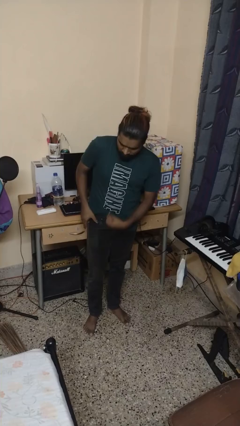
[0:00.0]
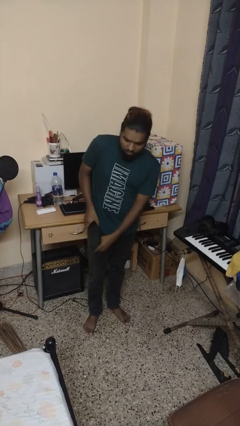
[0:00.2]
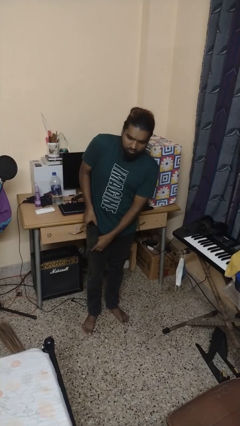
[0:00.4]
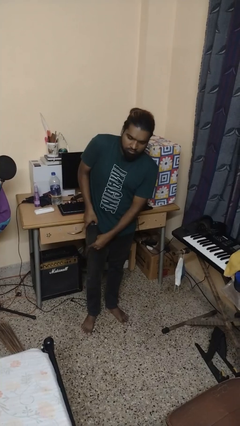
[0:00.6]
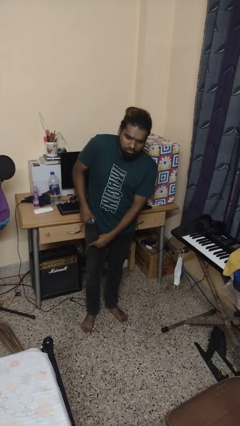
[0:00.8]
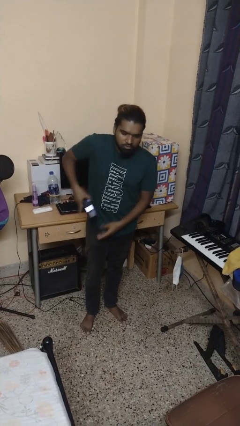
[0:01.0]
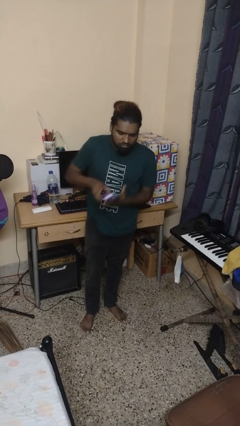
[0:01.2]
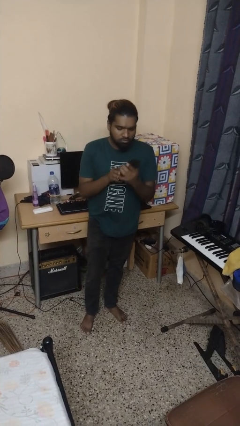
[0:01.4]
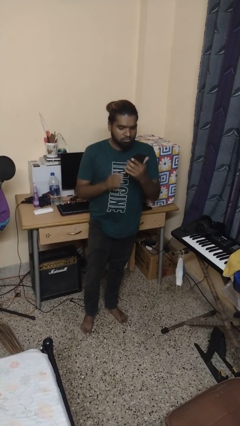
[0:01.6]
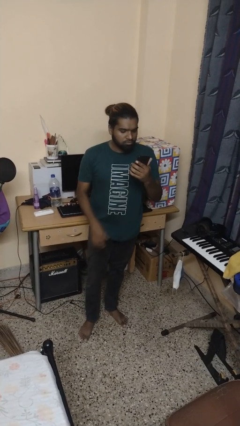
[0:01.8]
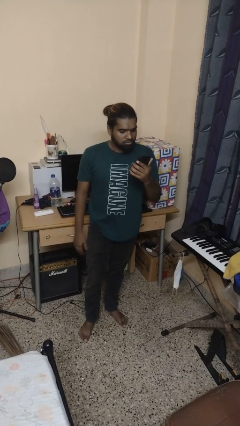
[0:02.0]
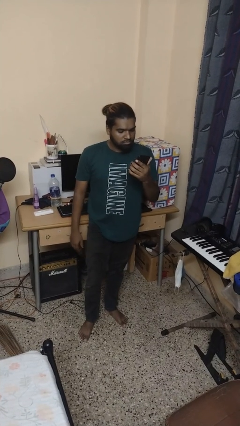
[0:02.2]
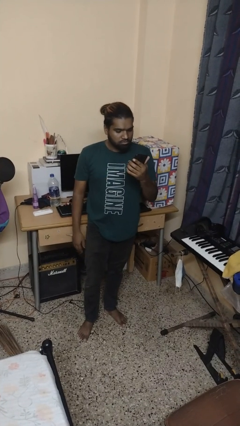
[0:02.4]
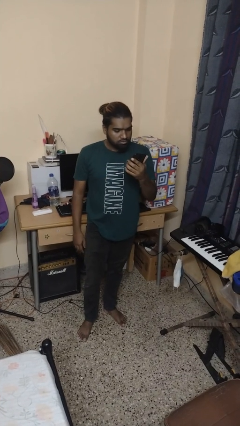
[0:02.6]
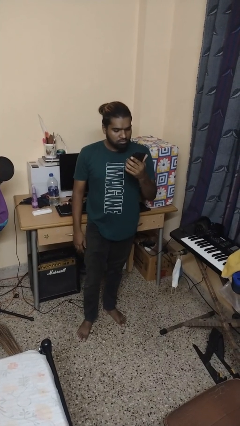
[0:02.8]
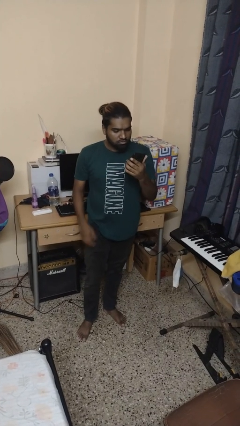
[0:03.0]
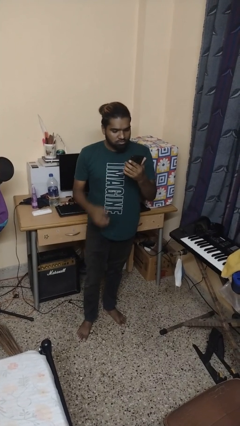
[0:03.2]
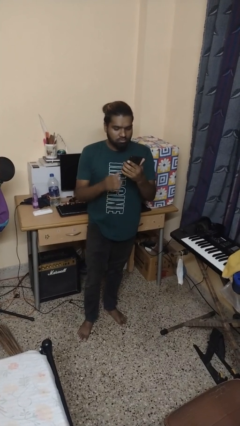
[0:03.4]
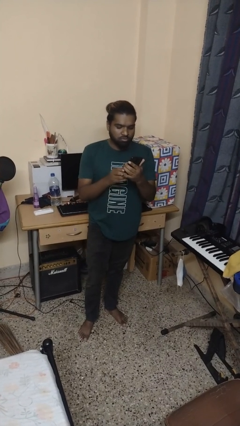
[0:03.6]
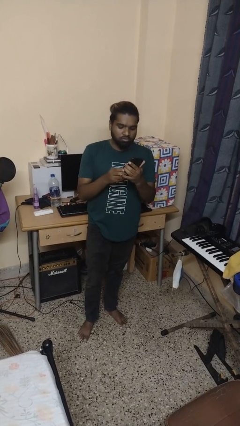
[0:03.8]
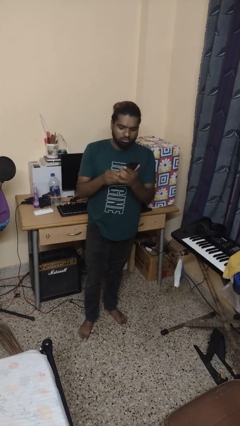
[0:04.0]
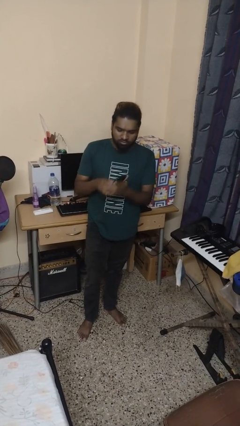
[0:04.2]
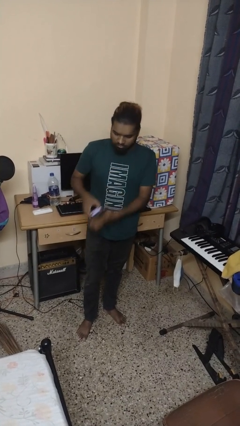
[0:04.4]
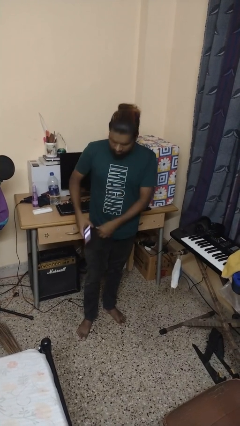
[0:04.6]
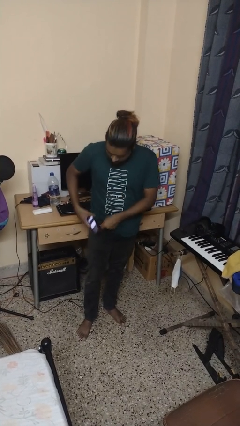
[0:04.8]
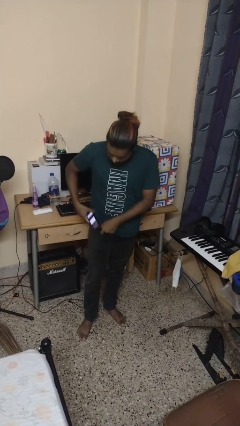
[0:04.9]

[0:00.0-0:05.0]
person takes phone from pocket

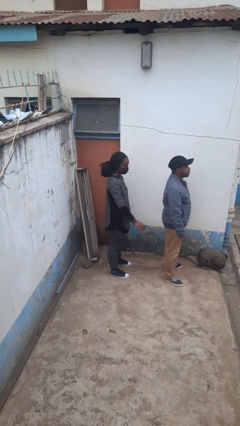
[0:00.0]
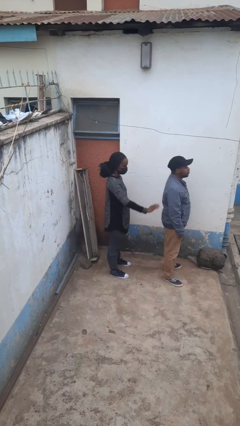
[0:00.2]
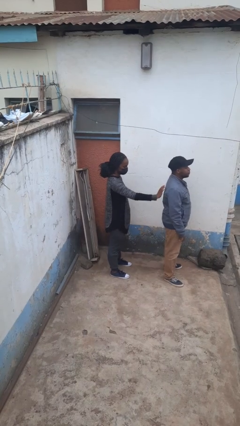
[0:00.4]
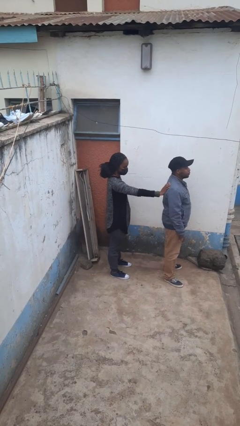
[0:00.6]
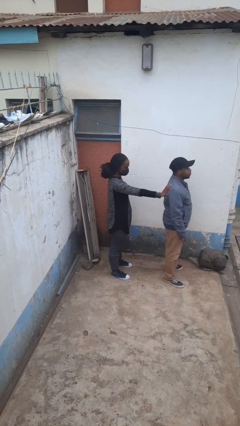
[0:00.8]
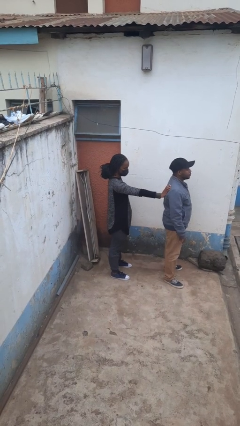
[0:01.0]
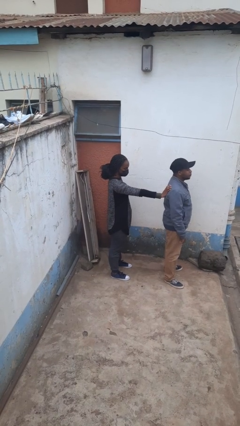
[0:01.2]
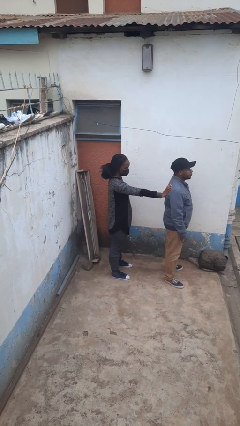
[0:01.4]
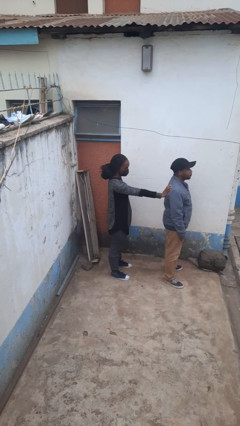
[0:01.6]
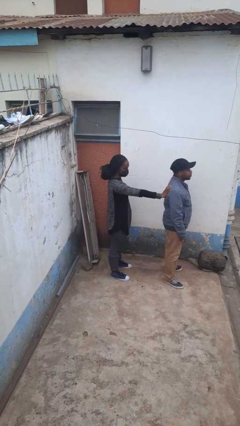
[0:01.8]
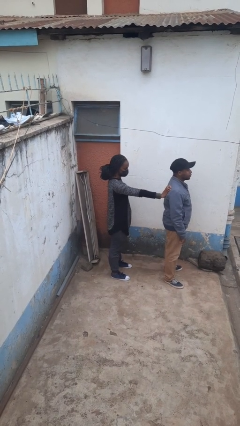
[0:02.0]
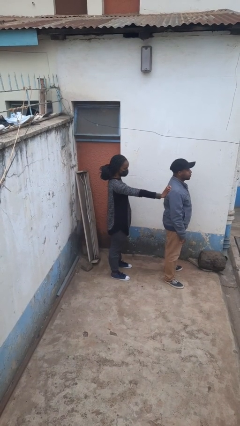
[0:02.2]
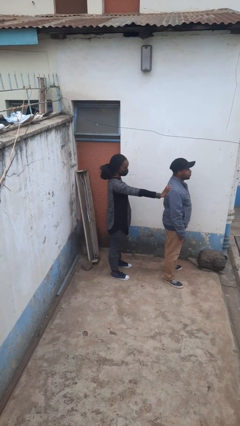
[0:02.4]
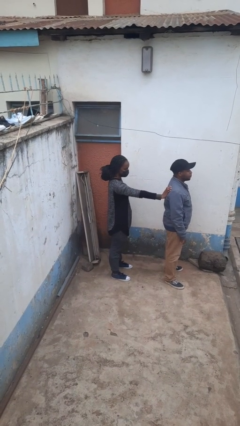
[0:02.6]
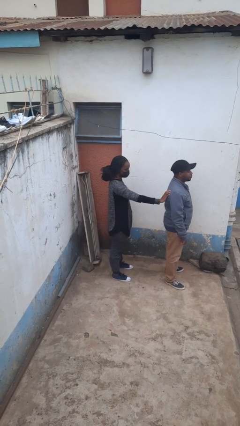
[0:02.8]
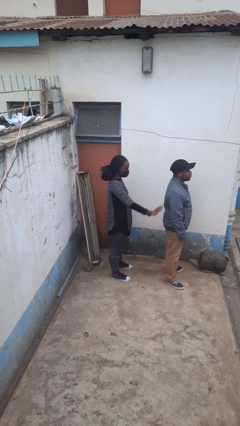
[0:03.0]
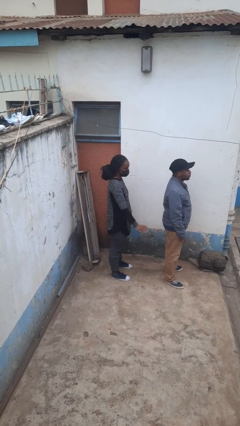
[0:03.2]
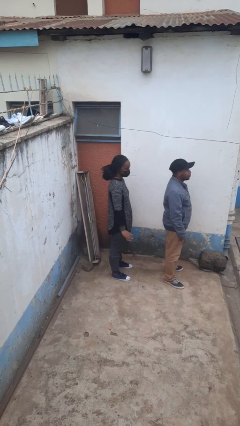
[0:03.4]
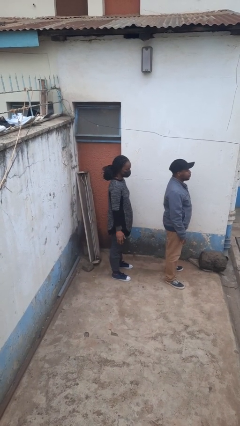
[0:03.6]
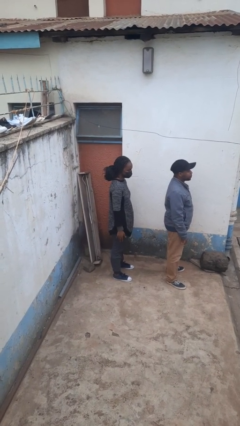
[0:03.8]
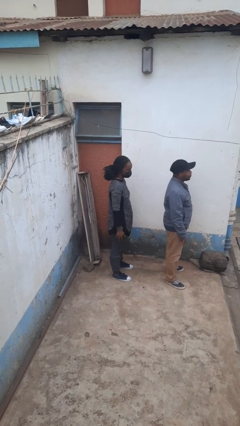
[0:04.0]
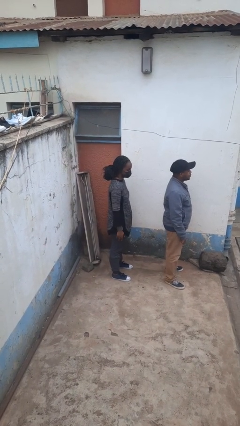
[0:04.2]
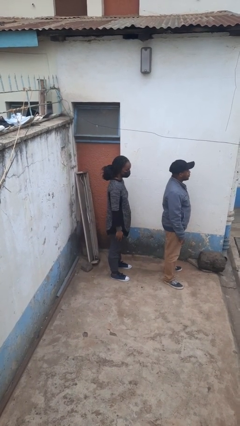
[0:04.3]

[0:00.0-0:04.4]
person touches back of person

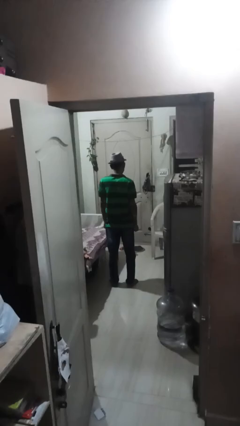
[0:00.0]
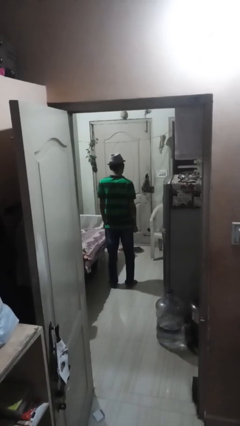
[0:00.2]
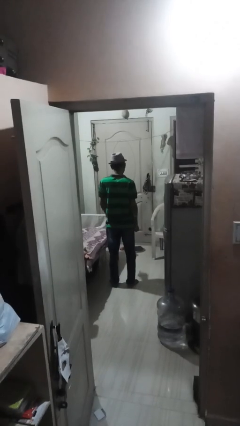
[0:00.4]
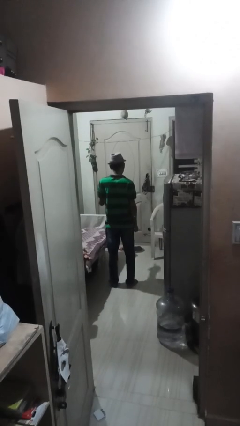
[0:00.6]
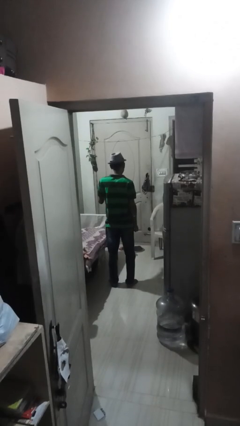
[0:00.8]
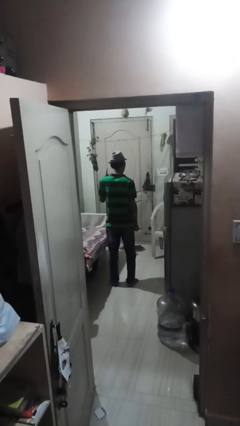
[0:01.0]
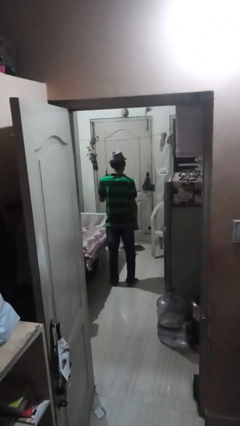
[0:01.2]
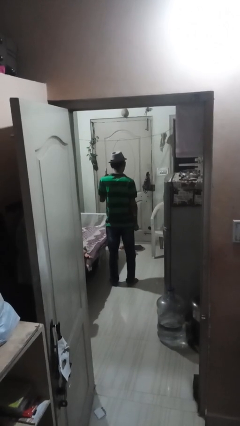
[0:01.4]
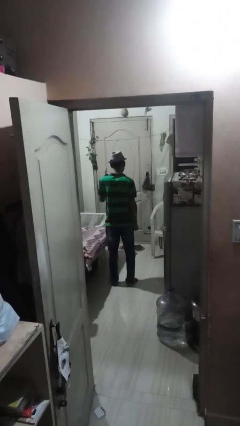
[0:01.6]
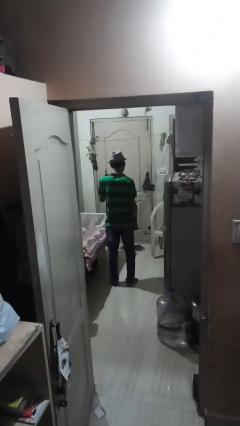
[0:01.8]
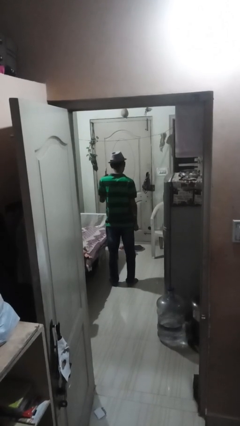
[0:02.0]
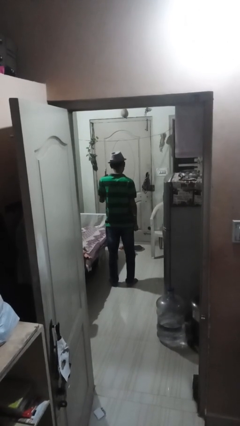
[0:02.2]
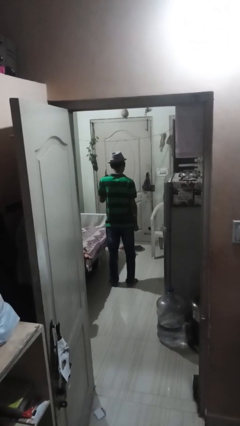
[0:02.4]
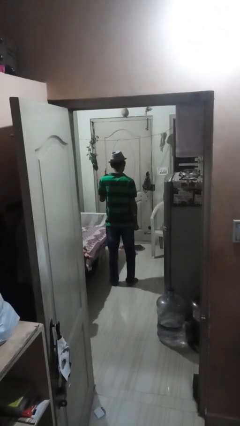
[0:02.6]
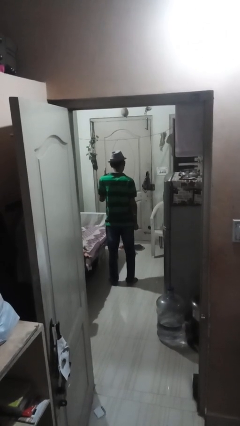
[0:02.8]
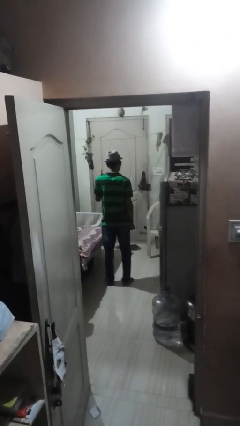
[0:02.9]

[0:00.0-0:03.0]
person gestures number one

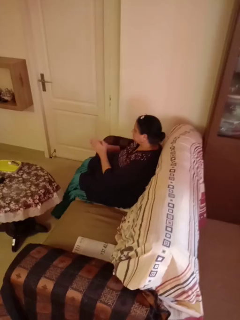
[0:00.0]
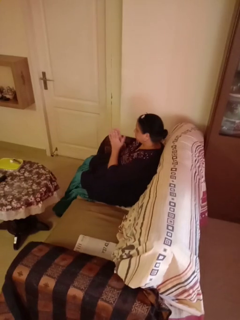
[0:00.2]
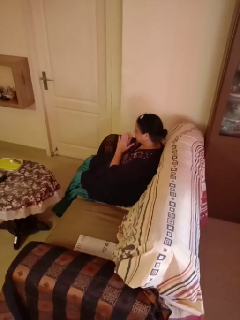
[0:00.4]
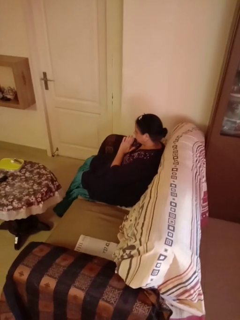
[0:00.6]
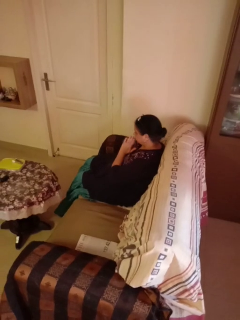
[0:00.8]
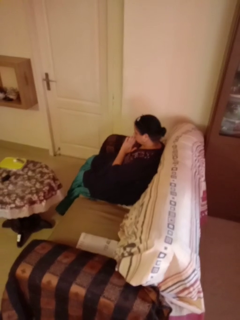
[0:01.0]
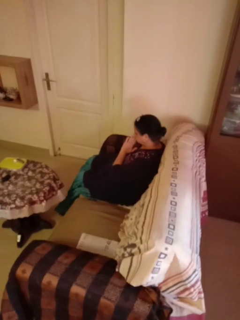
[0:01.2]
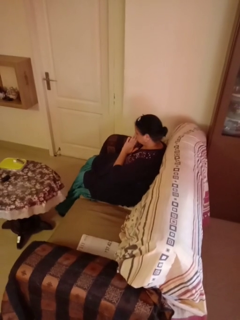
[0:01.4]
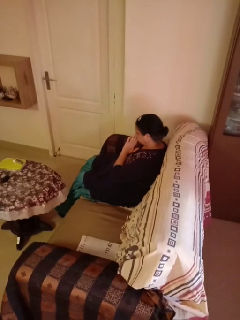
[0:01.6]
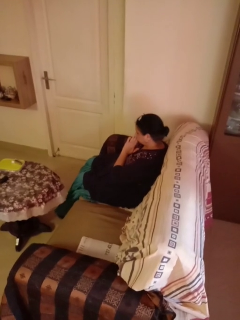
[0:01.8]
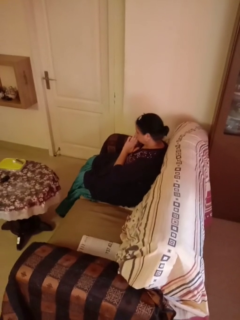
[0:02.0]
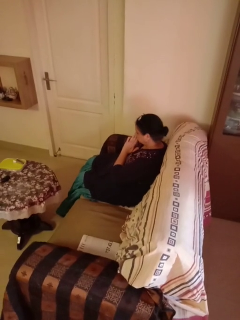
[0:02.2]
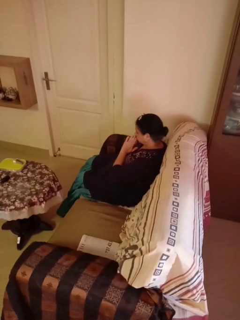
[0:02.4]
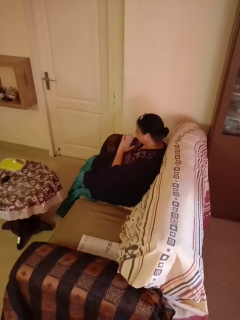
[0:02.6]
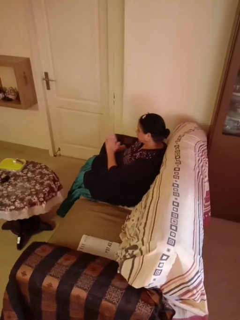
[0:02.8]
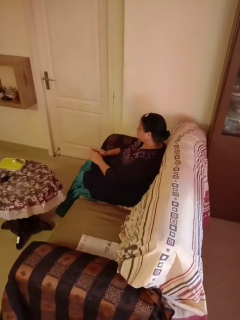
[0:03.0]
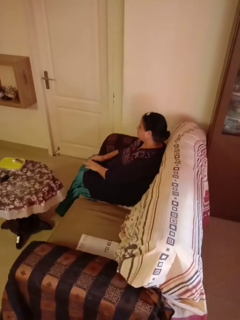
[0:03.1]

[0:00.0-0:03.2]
person prays

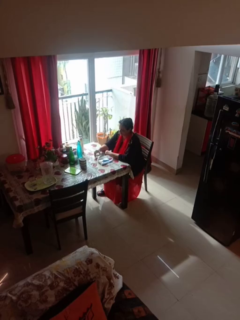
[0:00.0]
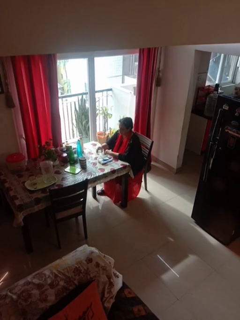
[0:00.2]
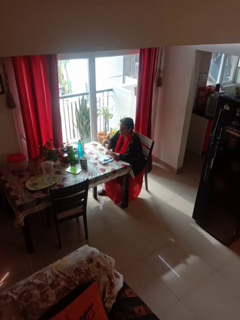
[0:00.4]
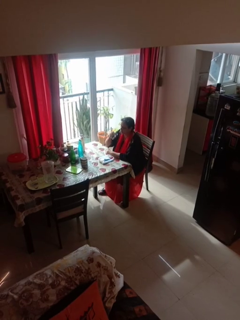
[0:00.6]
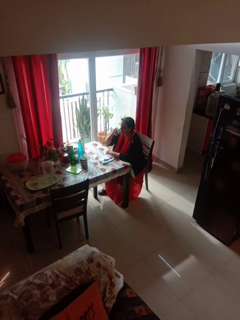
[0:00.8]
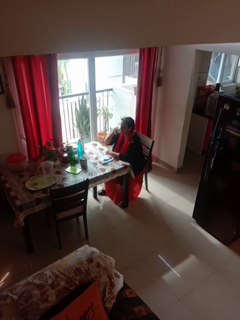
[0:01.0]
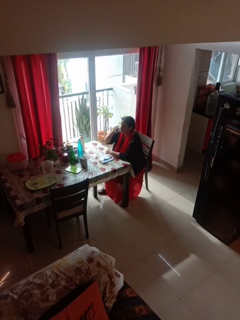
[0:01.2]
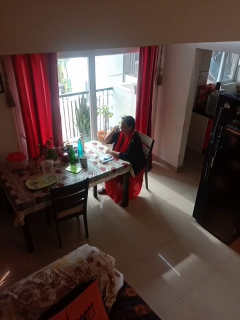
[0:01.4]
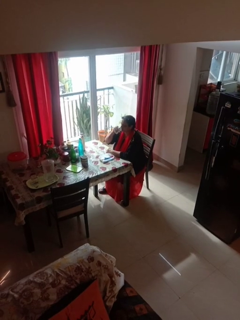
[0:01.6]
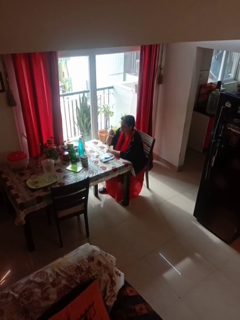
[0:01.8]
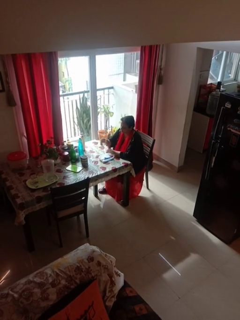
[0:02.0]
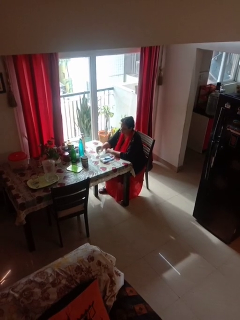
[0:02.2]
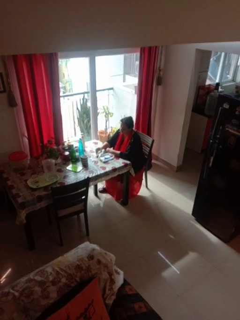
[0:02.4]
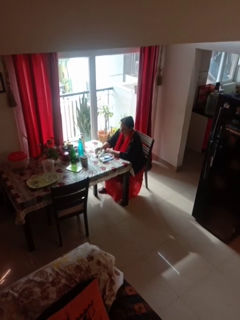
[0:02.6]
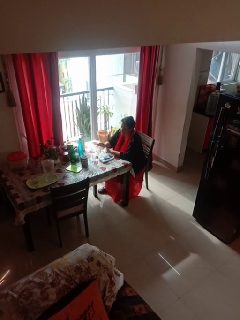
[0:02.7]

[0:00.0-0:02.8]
person drinks from cup

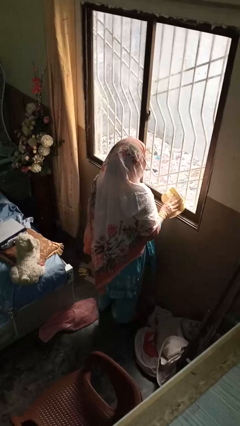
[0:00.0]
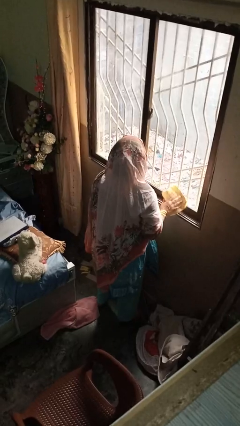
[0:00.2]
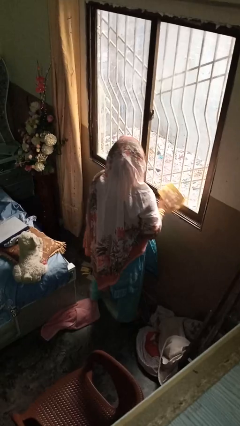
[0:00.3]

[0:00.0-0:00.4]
person sprays from bottle
